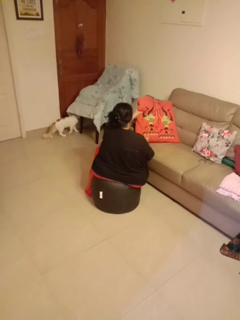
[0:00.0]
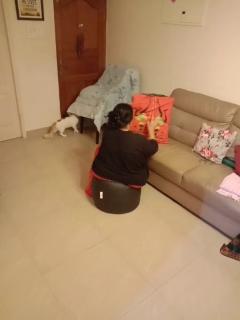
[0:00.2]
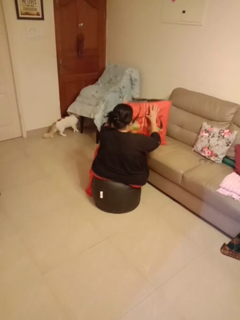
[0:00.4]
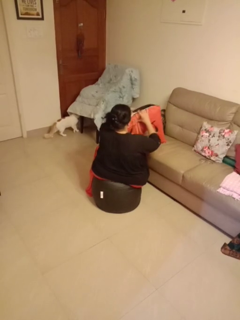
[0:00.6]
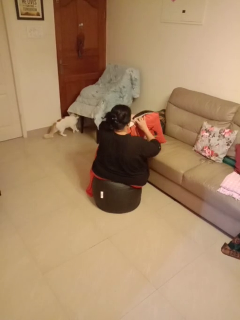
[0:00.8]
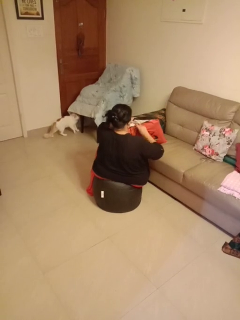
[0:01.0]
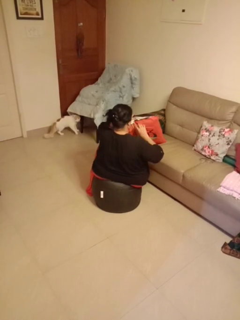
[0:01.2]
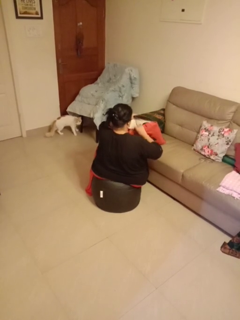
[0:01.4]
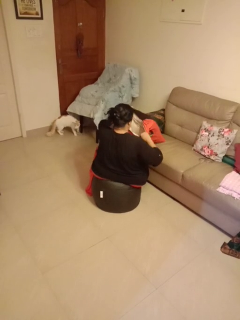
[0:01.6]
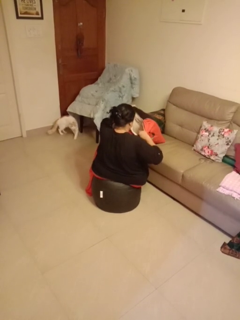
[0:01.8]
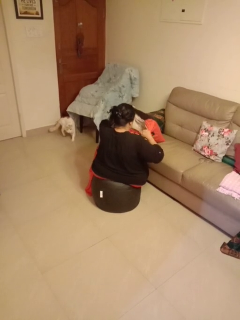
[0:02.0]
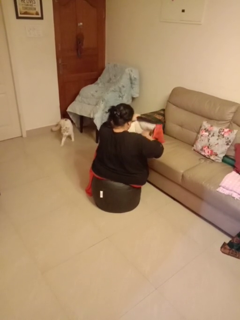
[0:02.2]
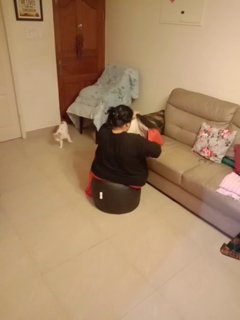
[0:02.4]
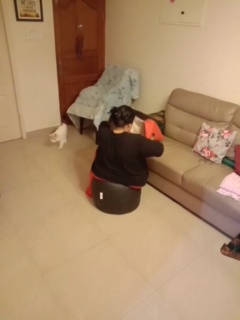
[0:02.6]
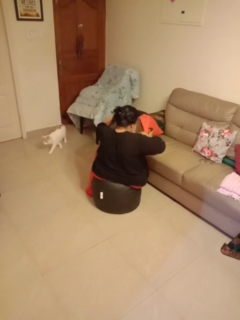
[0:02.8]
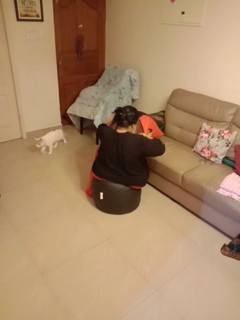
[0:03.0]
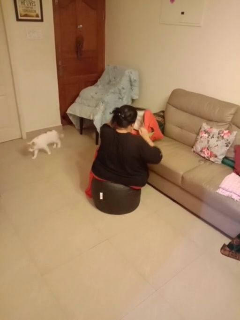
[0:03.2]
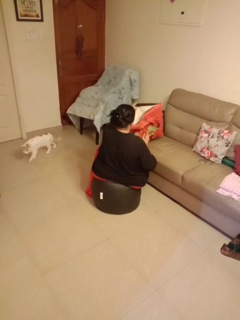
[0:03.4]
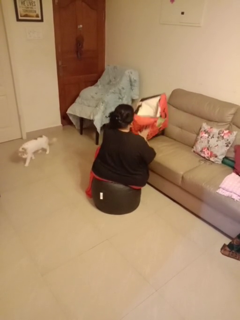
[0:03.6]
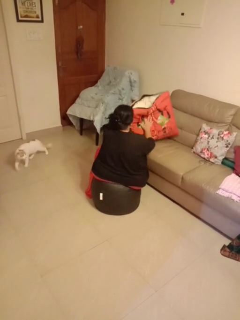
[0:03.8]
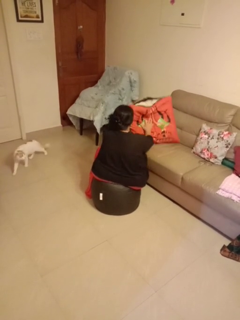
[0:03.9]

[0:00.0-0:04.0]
person searches in couch

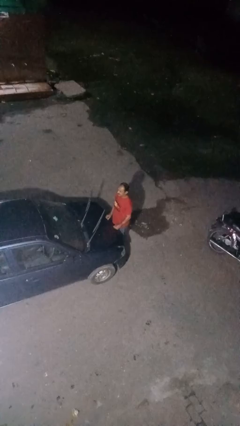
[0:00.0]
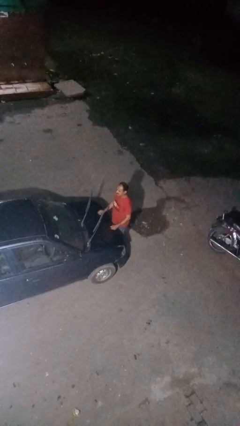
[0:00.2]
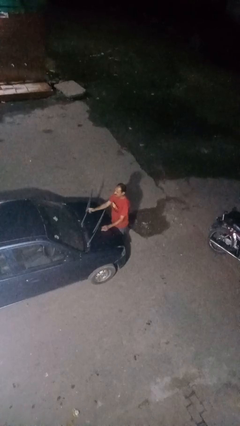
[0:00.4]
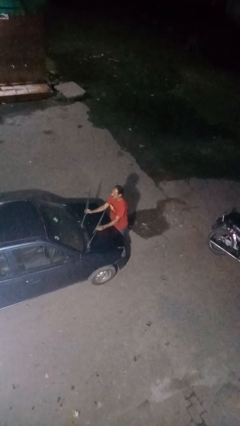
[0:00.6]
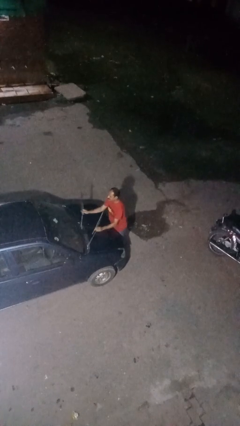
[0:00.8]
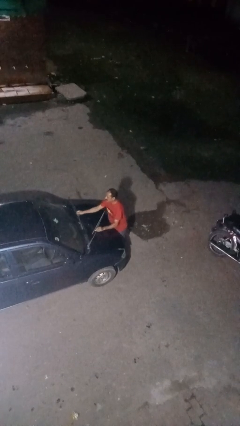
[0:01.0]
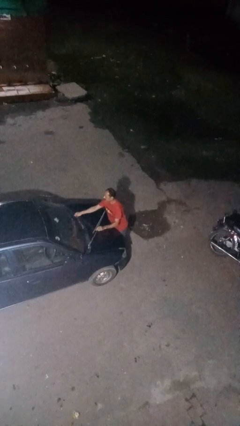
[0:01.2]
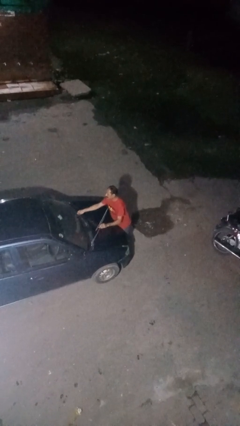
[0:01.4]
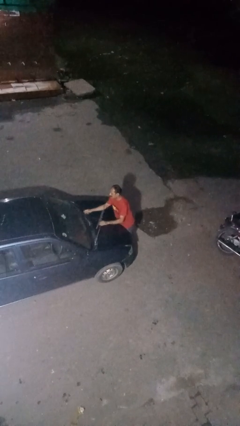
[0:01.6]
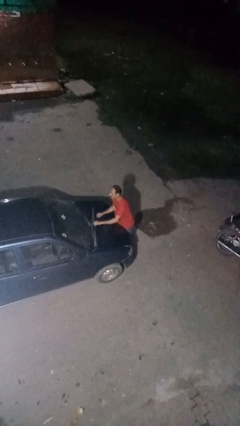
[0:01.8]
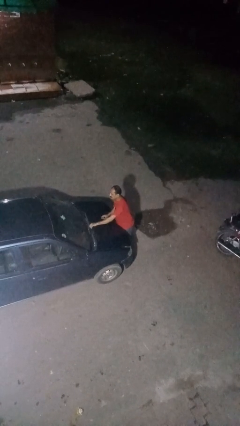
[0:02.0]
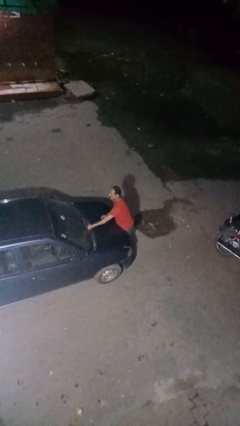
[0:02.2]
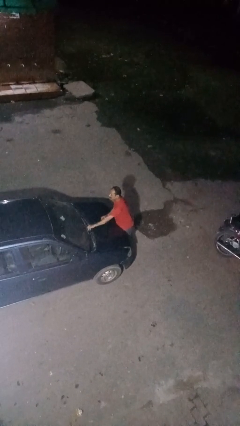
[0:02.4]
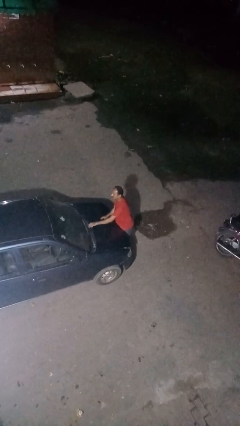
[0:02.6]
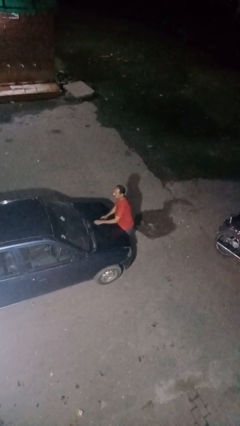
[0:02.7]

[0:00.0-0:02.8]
person flips down car wipers

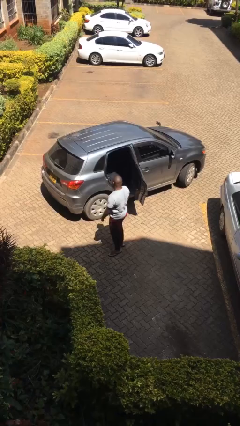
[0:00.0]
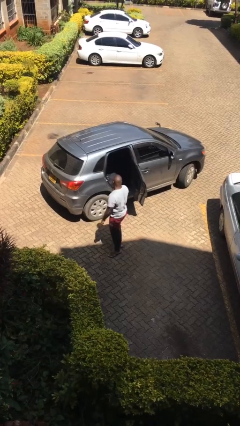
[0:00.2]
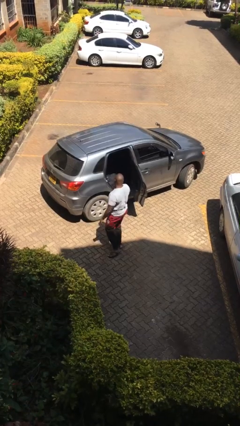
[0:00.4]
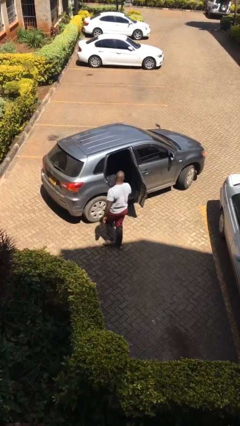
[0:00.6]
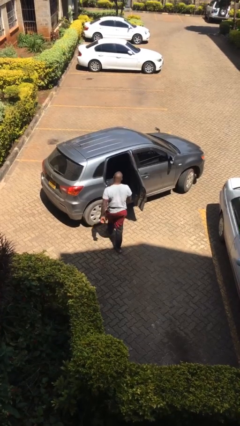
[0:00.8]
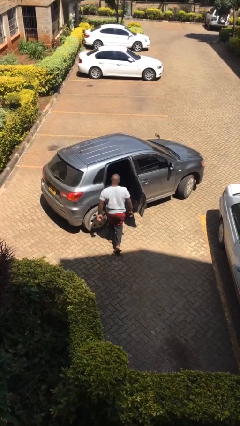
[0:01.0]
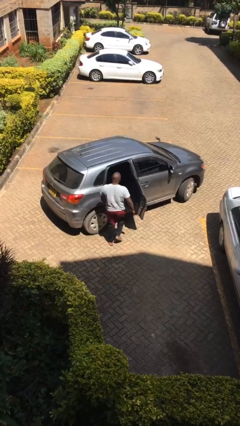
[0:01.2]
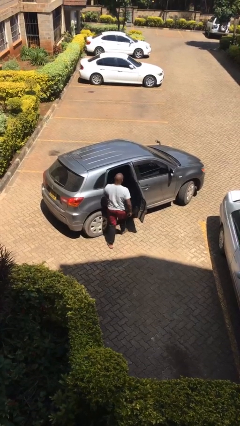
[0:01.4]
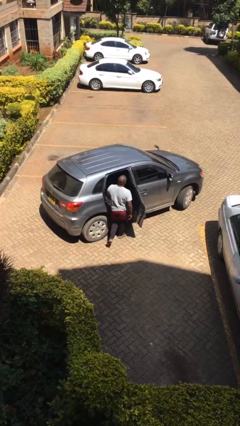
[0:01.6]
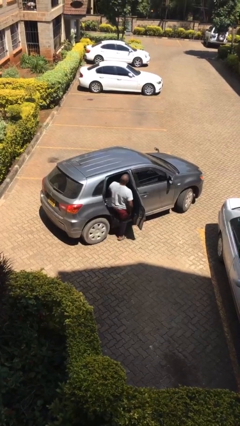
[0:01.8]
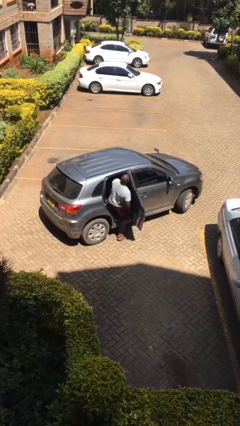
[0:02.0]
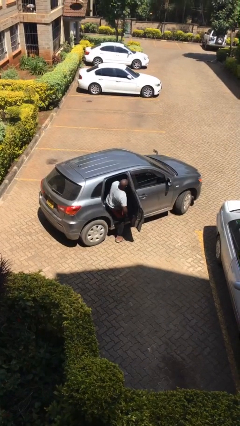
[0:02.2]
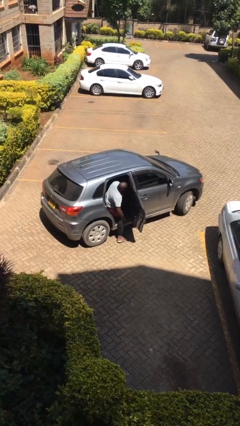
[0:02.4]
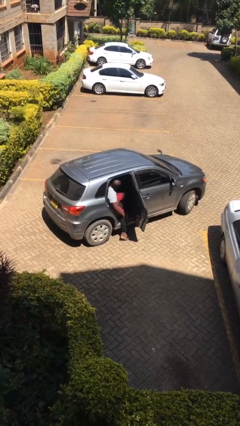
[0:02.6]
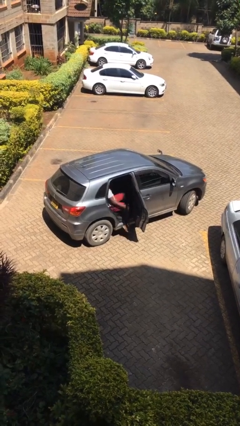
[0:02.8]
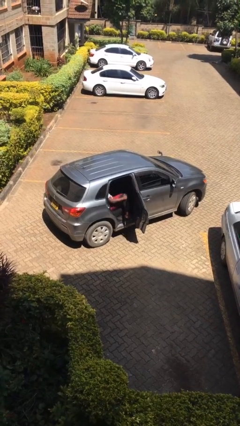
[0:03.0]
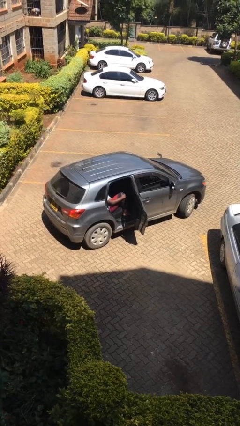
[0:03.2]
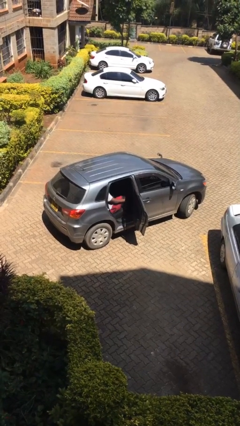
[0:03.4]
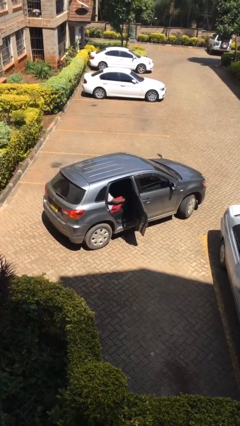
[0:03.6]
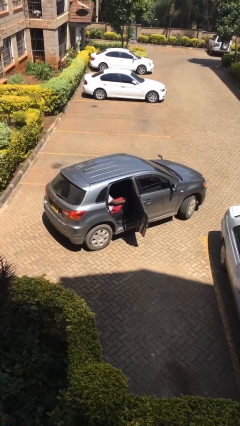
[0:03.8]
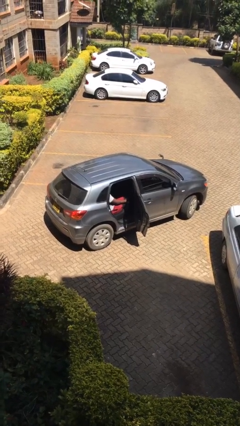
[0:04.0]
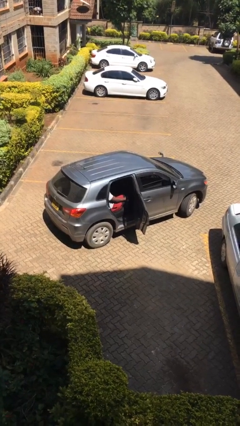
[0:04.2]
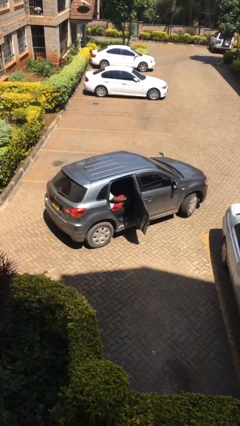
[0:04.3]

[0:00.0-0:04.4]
person enters car

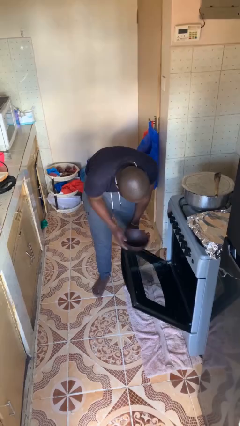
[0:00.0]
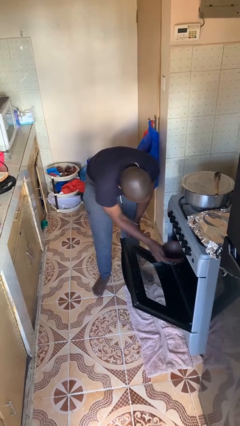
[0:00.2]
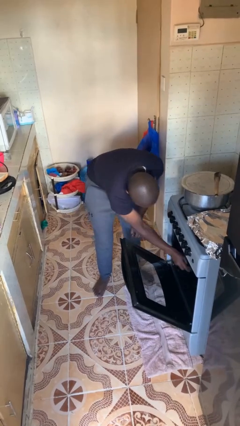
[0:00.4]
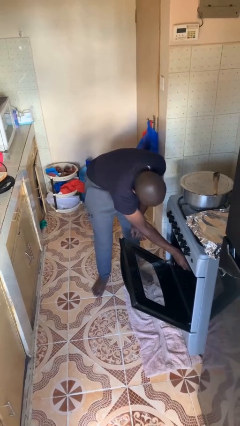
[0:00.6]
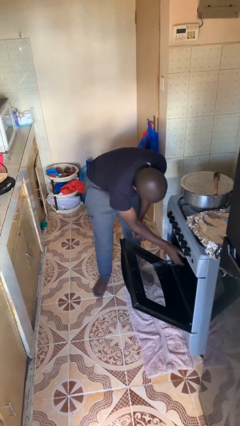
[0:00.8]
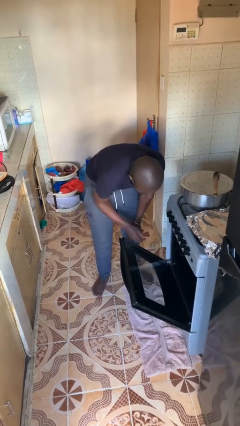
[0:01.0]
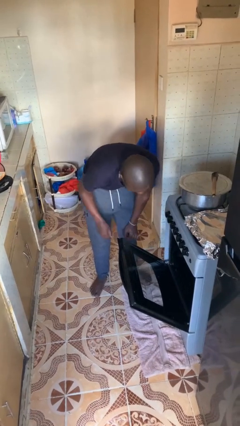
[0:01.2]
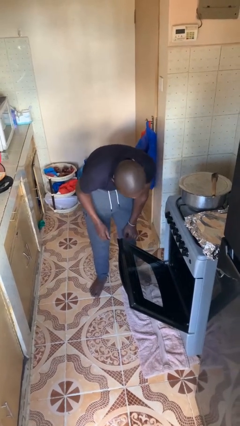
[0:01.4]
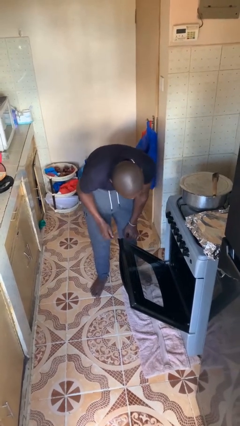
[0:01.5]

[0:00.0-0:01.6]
person puts object into oven

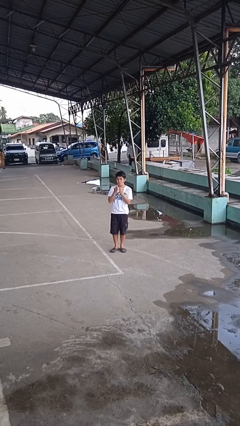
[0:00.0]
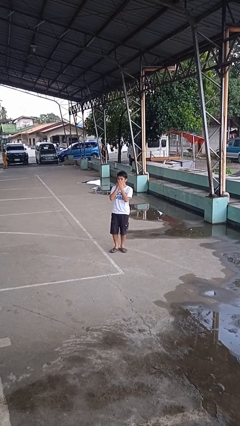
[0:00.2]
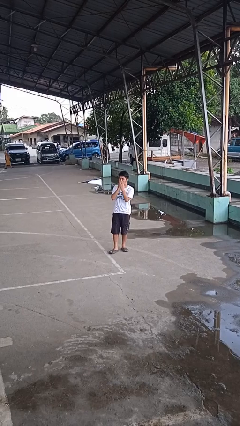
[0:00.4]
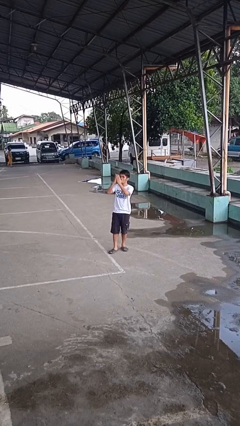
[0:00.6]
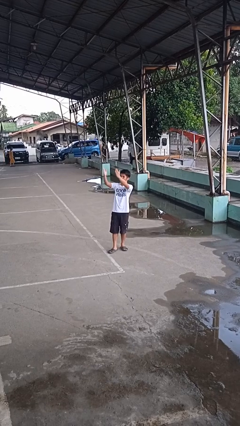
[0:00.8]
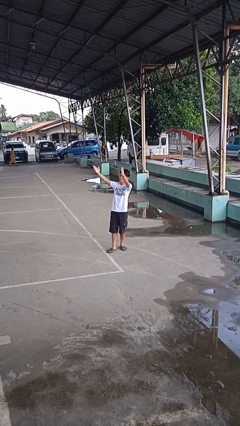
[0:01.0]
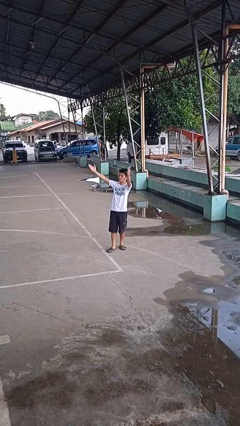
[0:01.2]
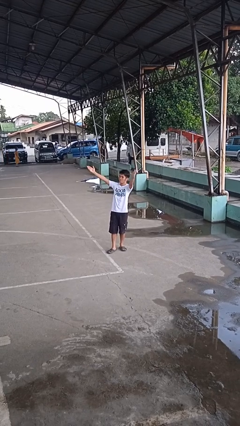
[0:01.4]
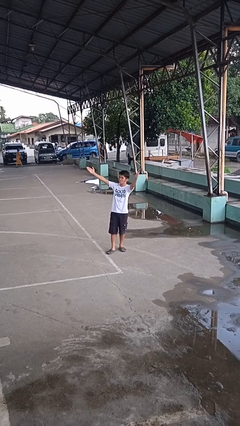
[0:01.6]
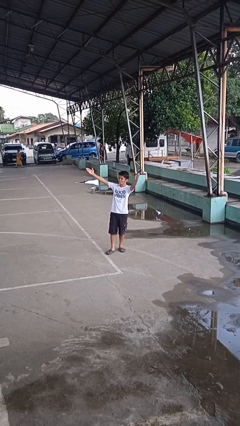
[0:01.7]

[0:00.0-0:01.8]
person gestures blow kiss

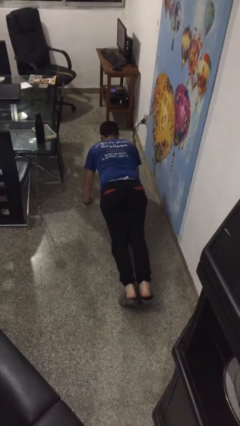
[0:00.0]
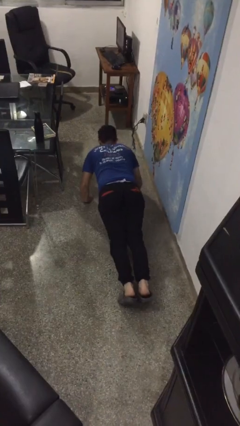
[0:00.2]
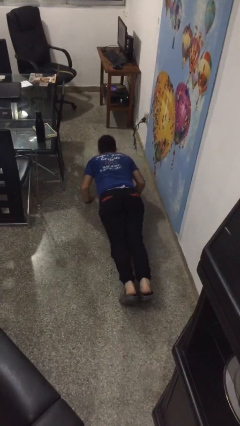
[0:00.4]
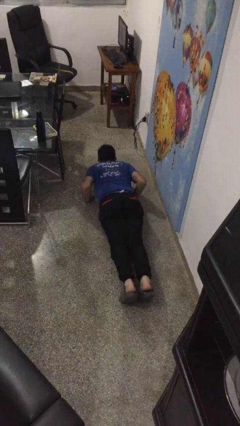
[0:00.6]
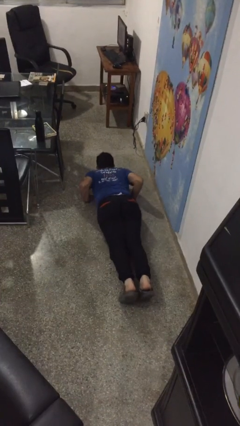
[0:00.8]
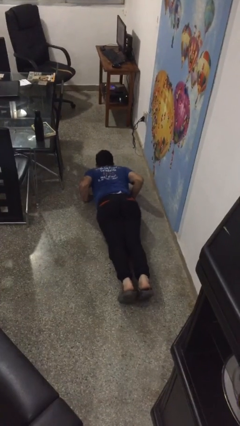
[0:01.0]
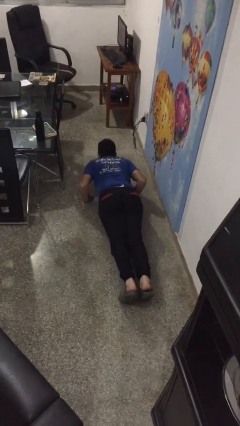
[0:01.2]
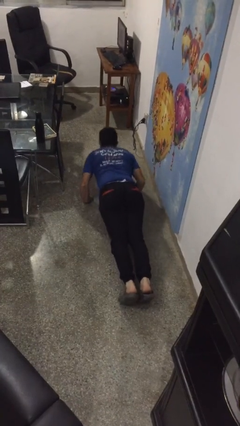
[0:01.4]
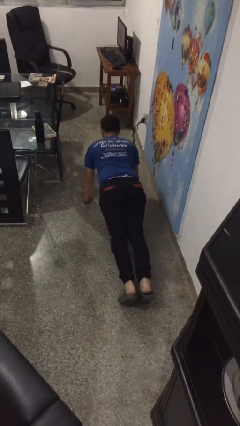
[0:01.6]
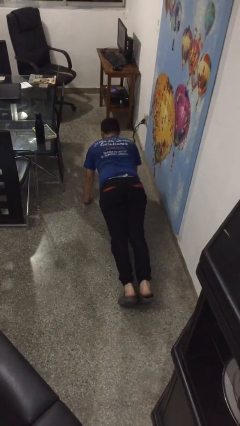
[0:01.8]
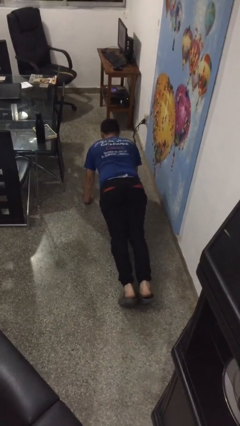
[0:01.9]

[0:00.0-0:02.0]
person exercises with pushup

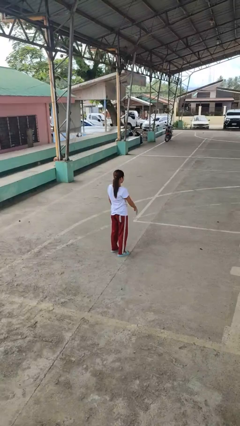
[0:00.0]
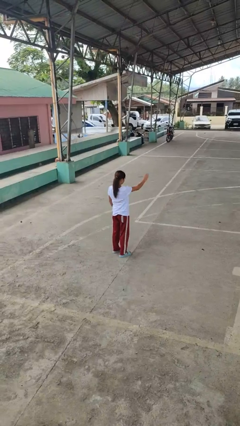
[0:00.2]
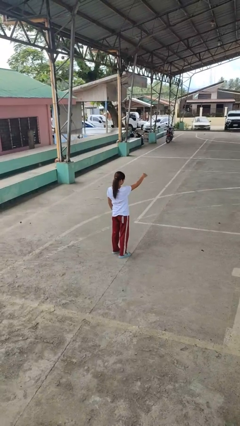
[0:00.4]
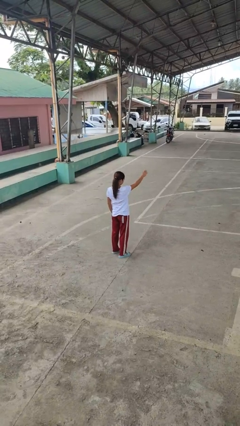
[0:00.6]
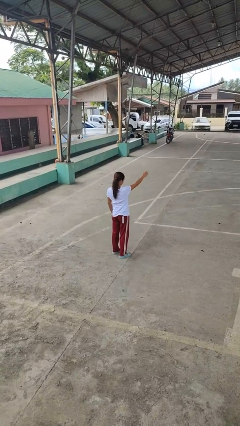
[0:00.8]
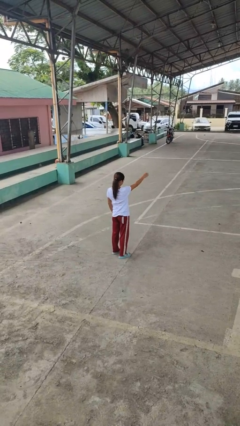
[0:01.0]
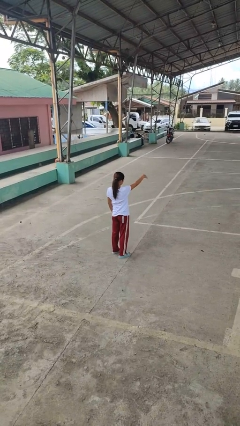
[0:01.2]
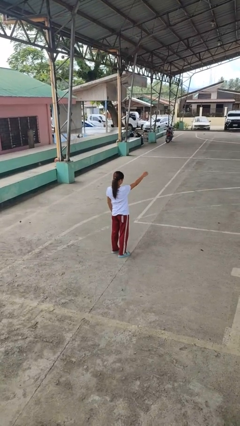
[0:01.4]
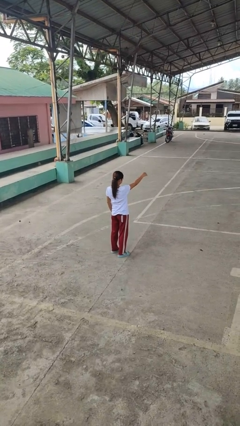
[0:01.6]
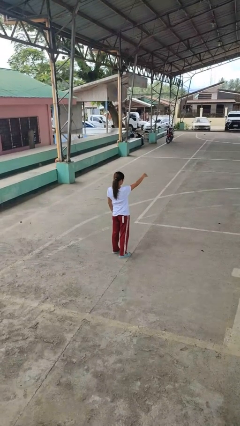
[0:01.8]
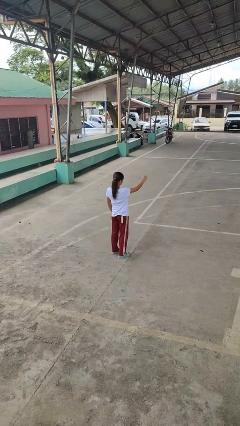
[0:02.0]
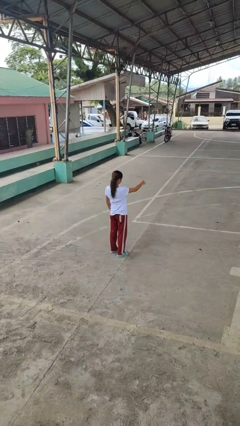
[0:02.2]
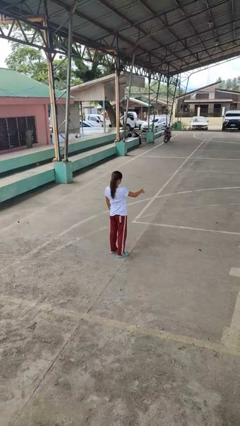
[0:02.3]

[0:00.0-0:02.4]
person gestures come here
